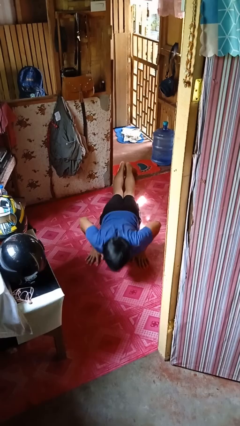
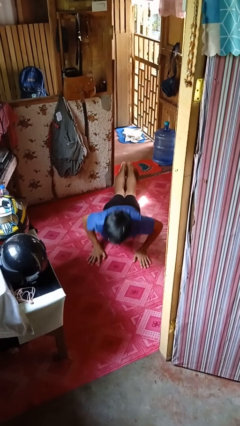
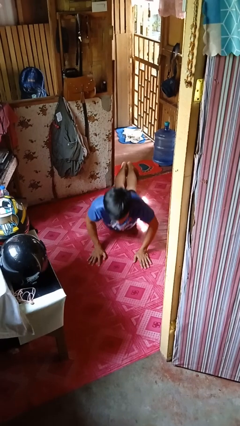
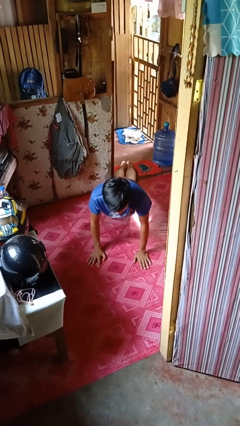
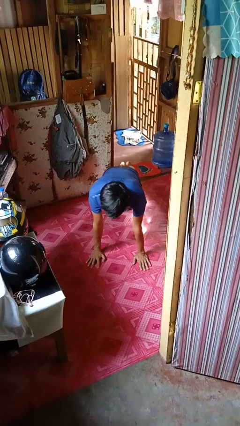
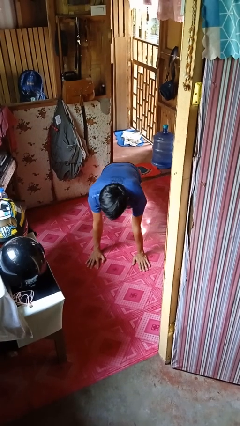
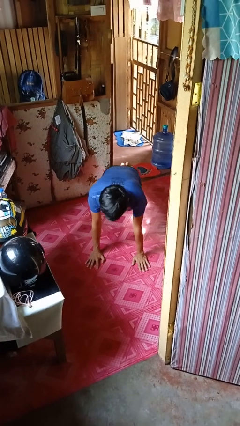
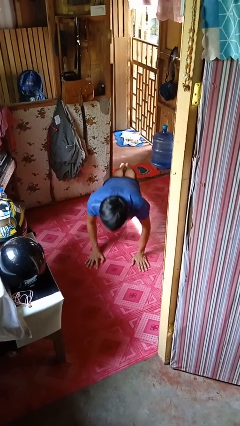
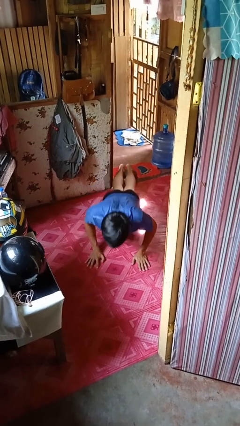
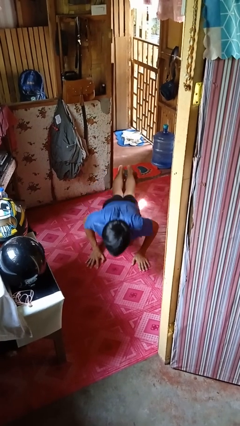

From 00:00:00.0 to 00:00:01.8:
person exercises with pushup

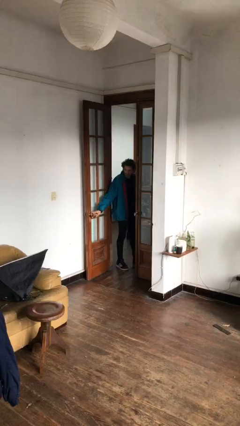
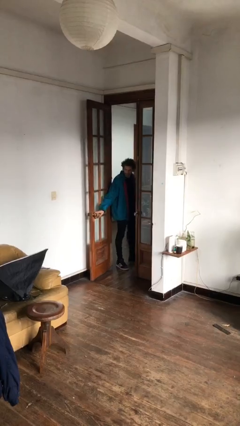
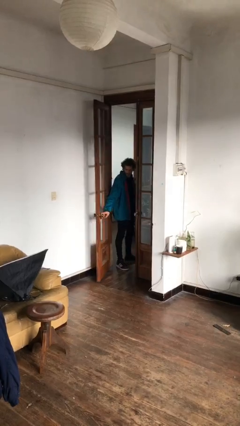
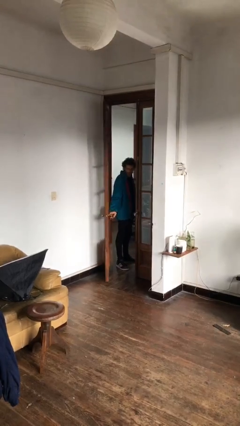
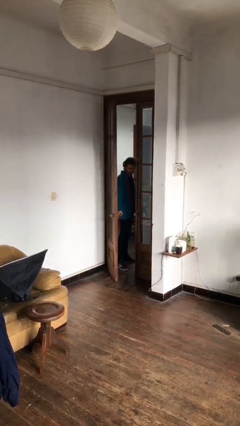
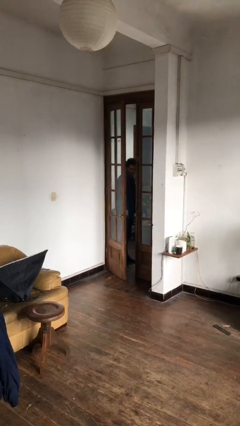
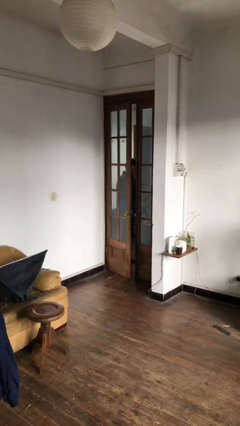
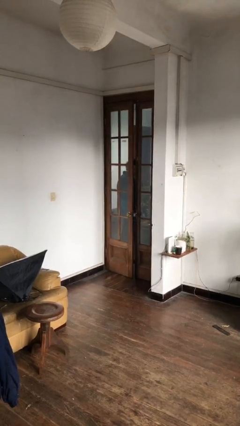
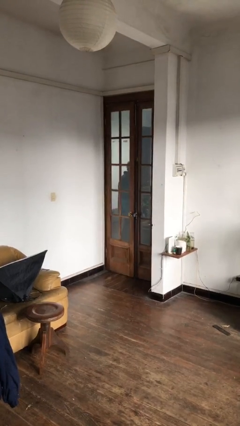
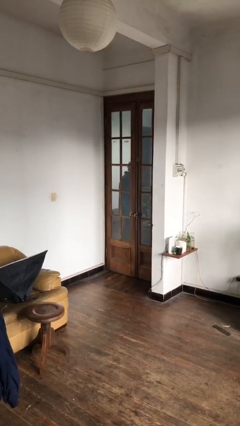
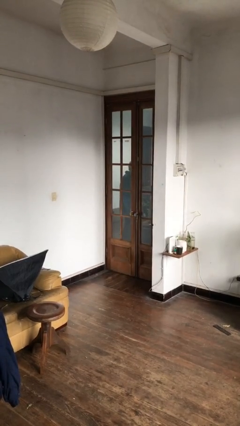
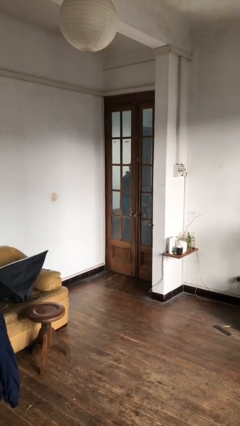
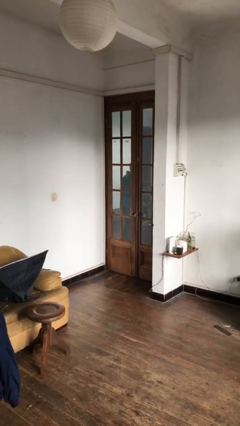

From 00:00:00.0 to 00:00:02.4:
person closes facility door

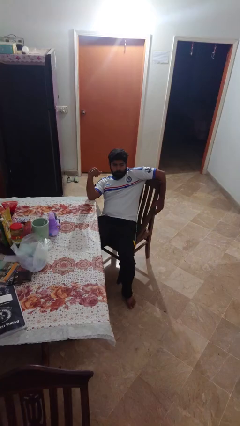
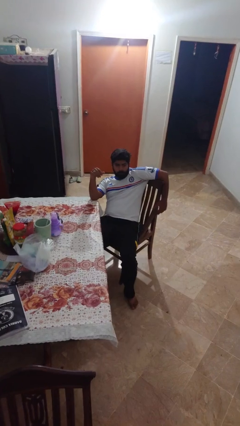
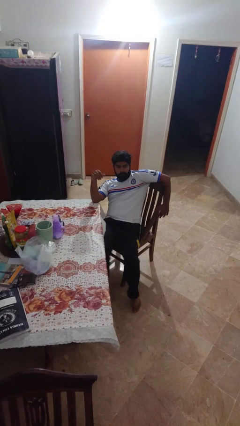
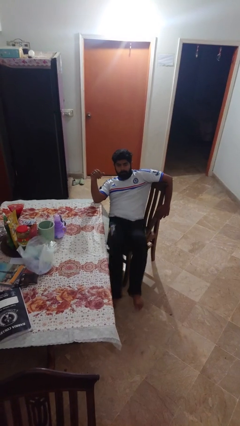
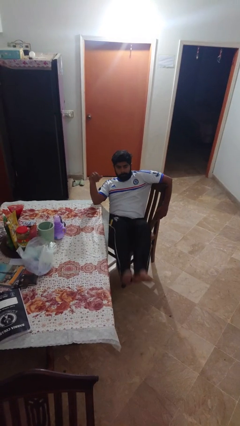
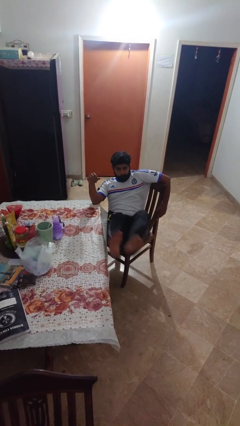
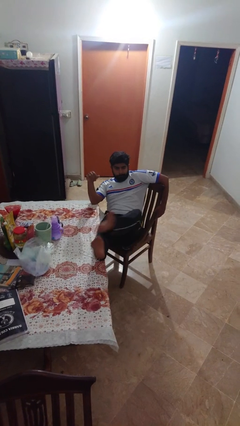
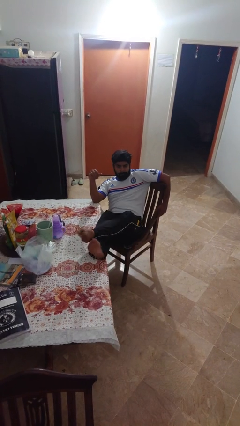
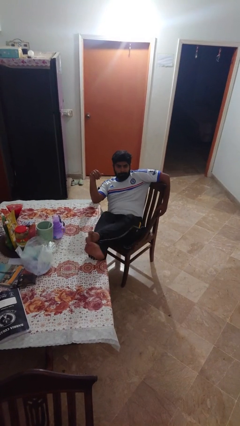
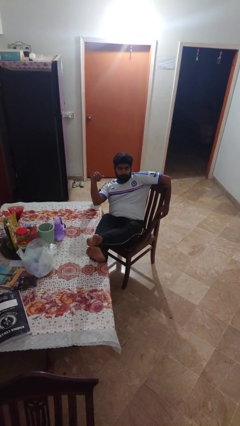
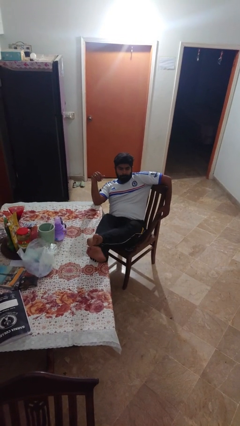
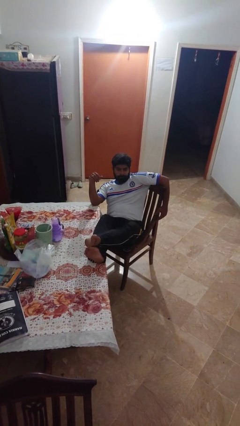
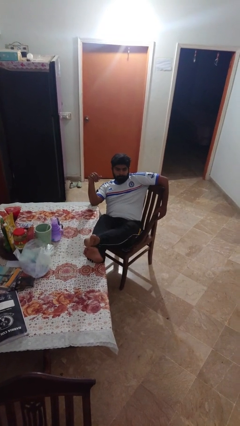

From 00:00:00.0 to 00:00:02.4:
person puts feet up

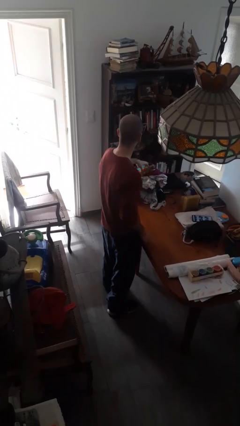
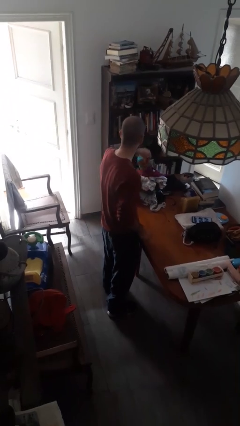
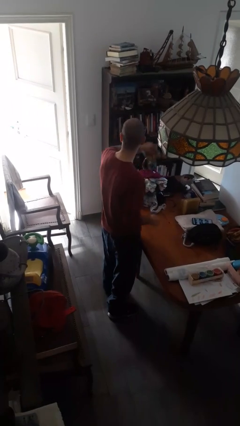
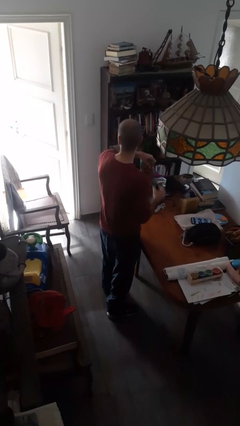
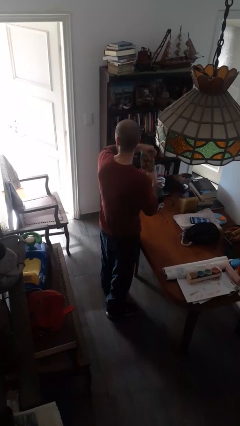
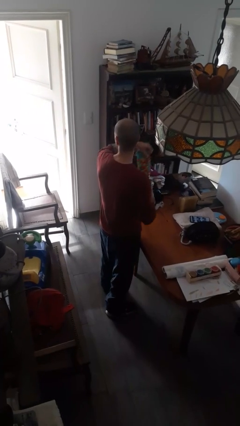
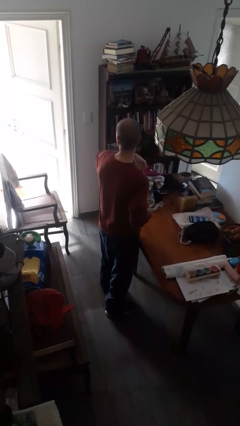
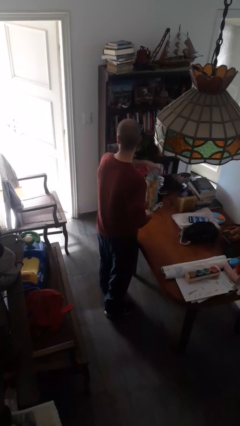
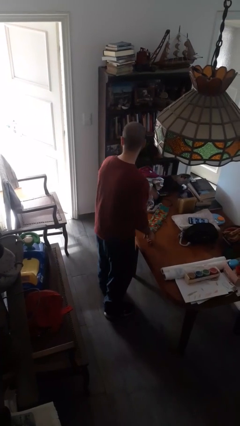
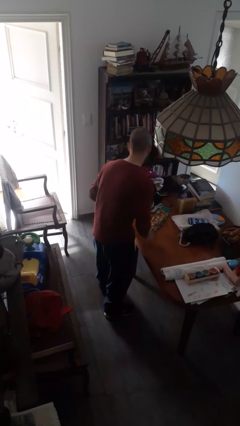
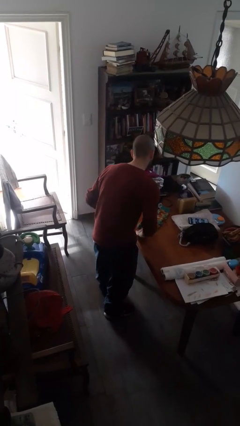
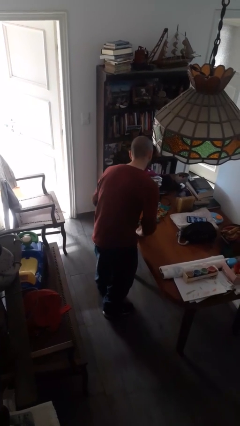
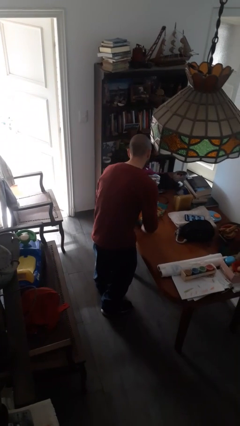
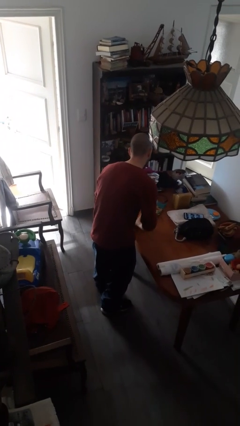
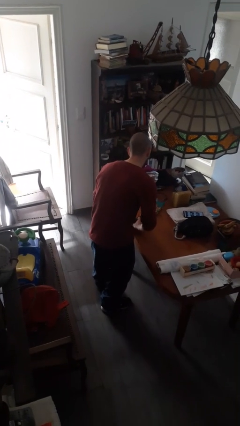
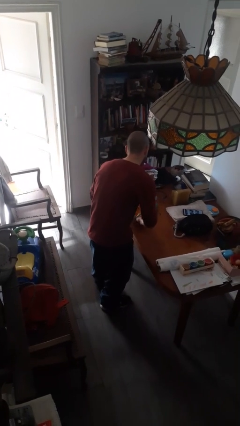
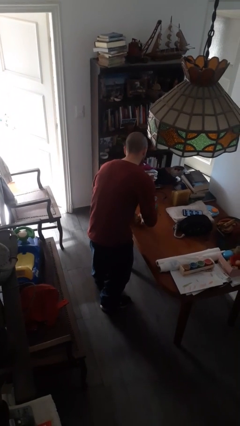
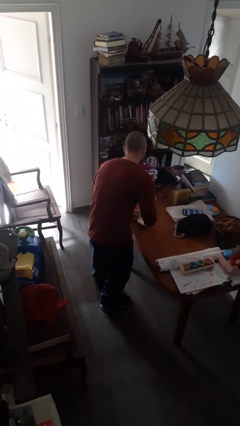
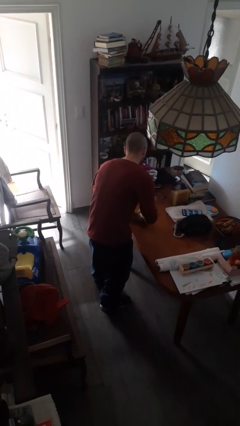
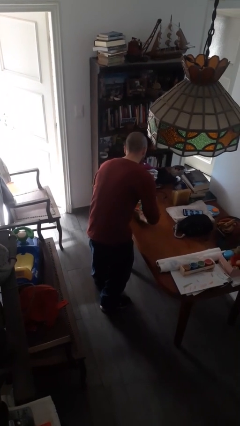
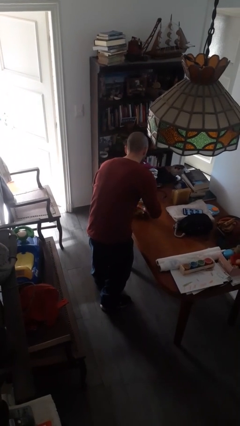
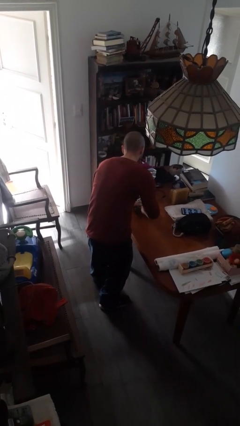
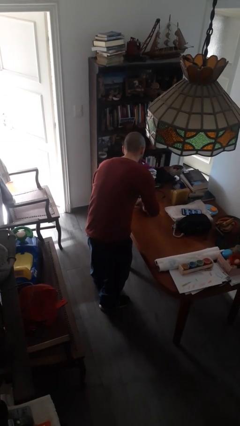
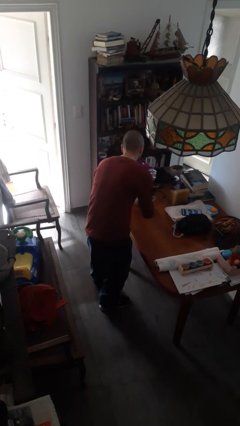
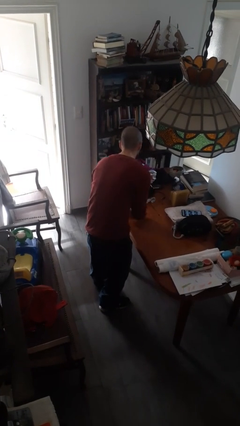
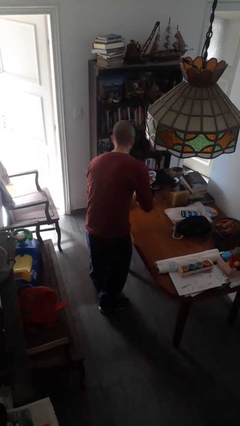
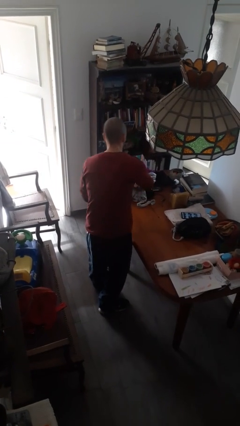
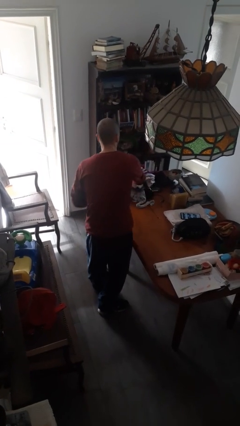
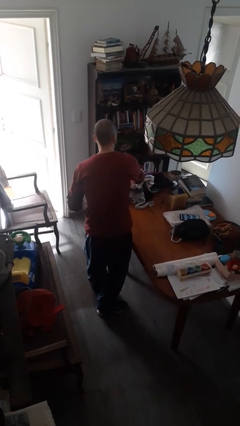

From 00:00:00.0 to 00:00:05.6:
person folds socks

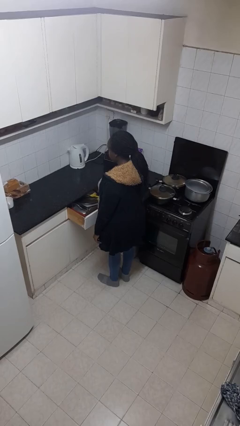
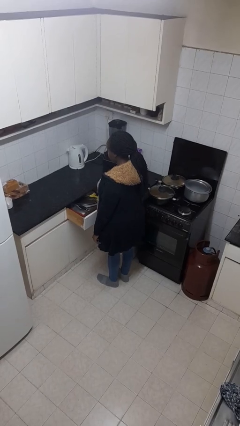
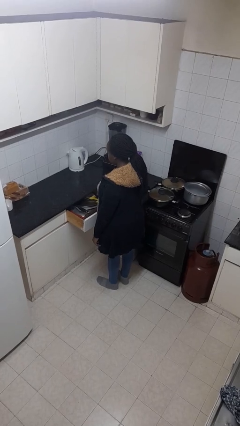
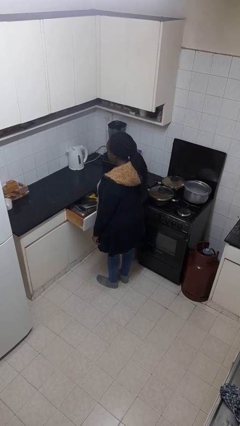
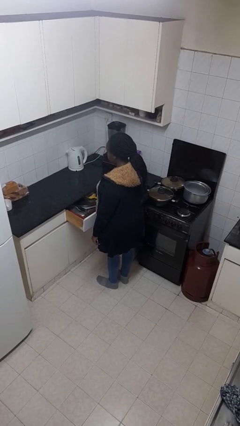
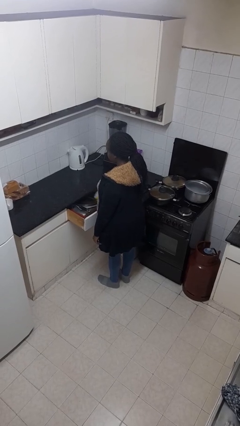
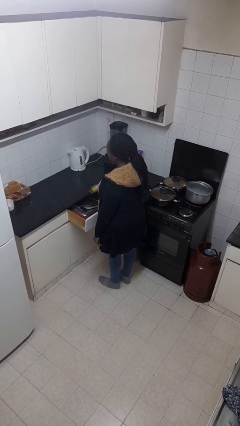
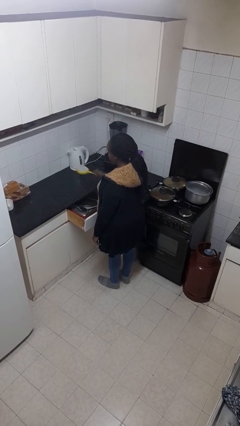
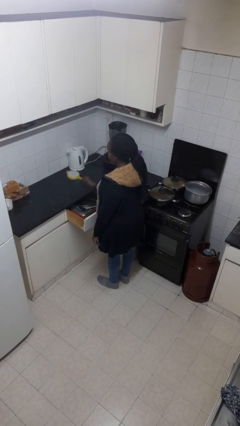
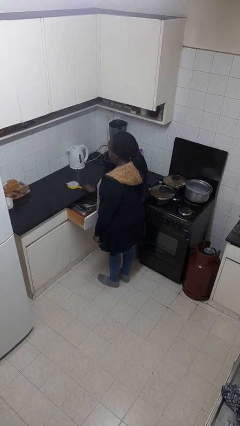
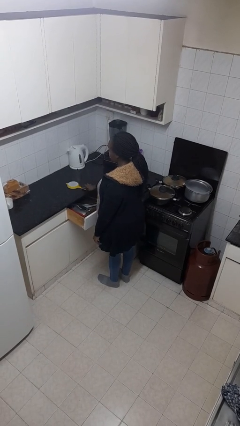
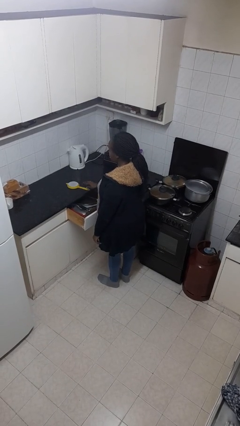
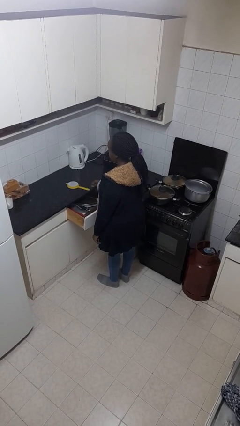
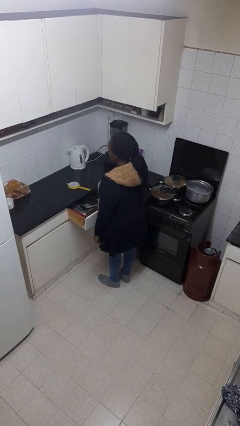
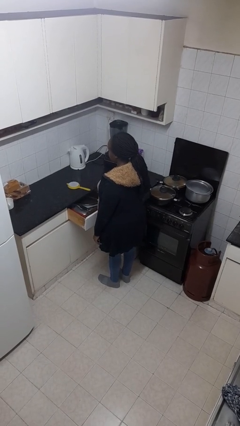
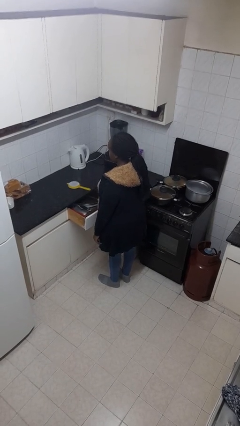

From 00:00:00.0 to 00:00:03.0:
person takes object from kitchen drawer

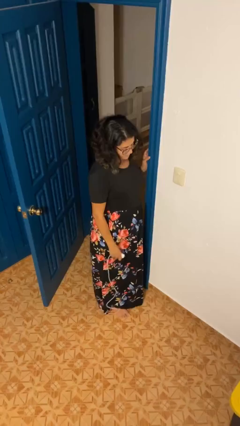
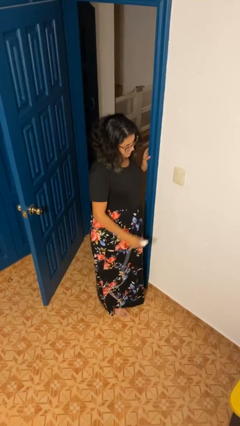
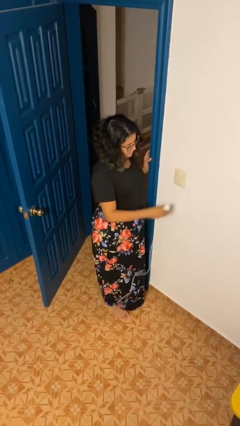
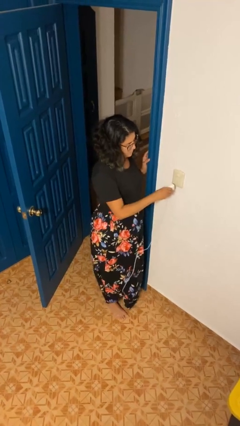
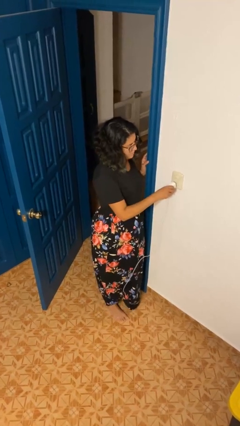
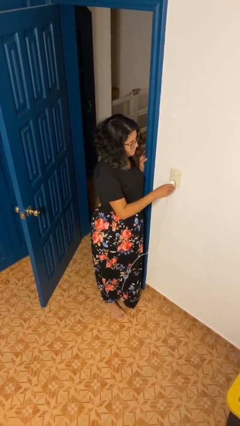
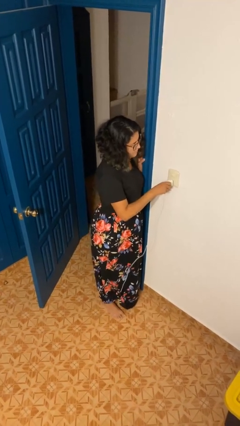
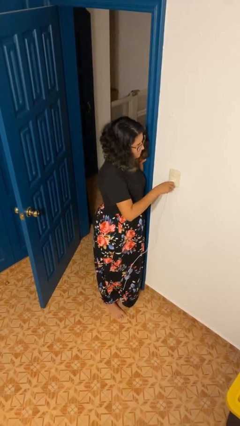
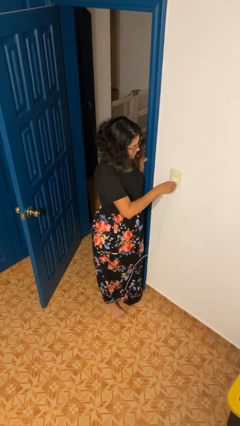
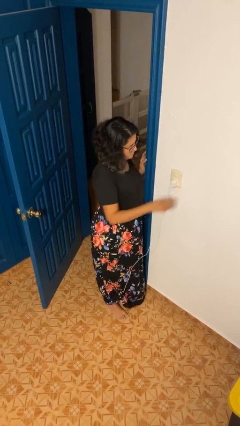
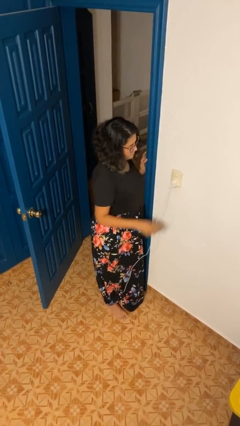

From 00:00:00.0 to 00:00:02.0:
person plugs into electrical socket

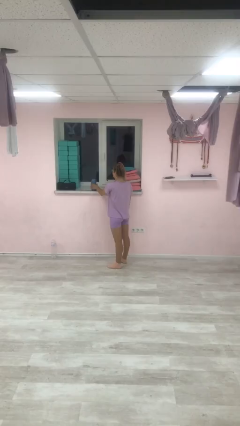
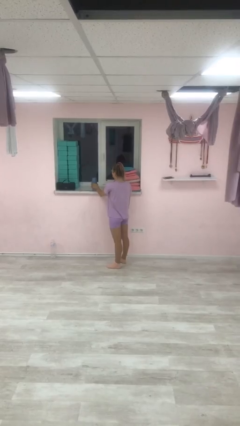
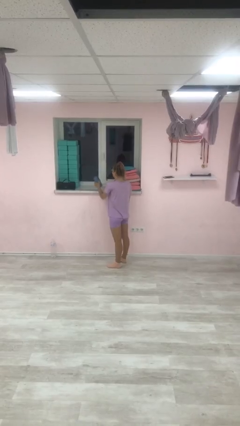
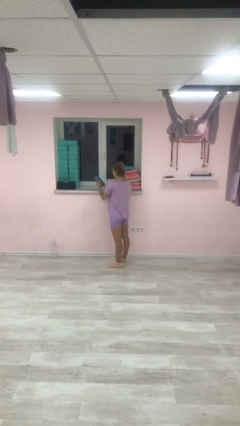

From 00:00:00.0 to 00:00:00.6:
person picks up object from countertop
